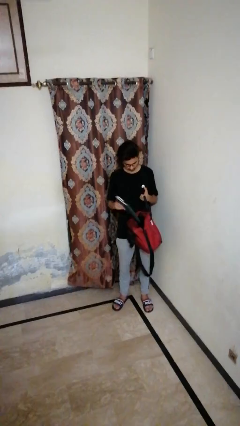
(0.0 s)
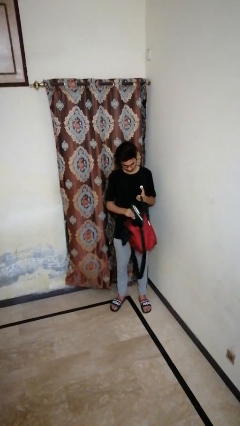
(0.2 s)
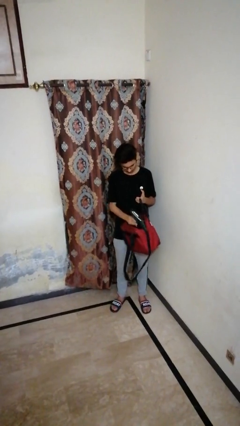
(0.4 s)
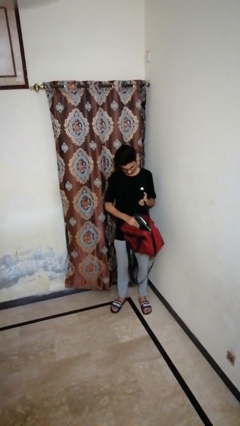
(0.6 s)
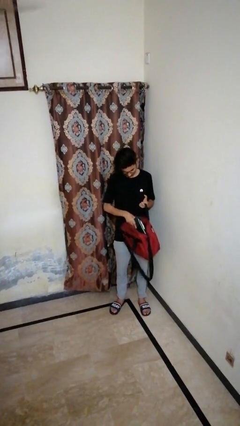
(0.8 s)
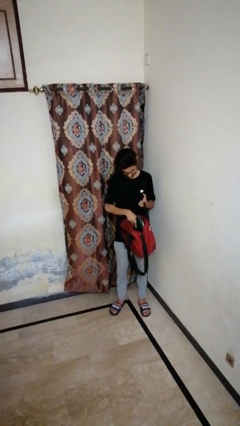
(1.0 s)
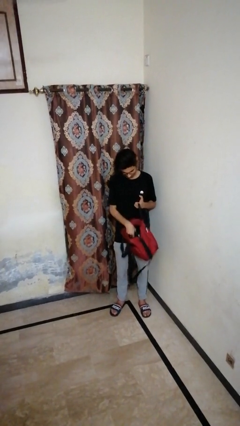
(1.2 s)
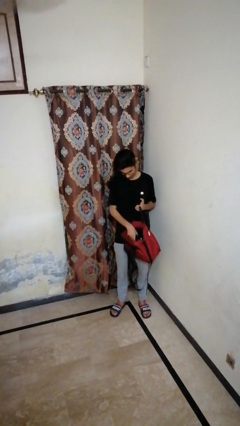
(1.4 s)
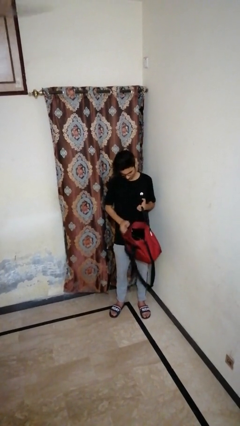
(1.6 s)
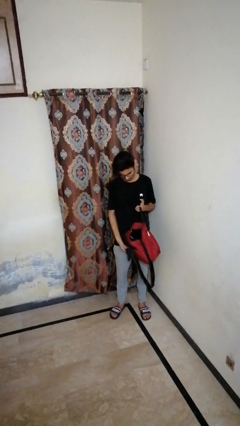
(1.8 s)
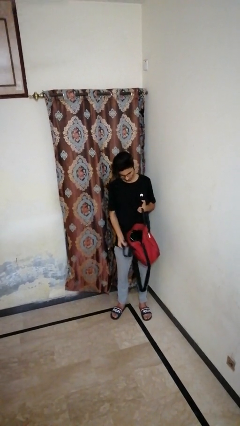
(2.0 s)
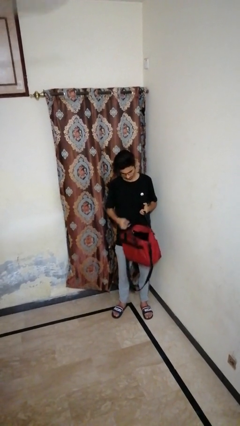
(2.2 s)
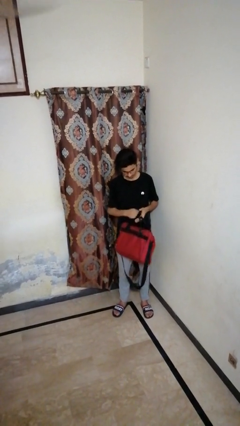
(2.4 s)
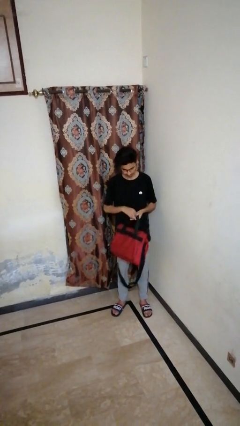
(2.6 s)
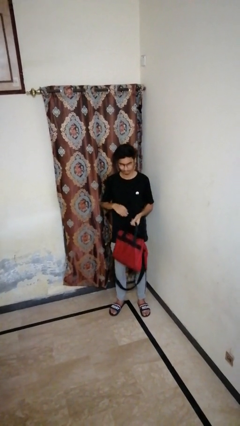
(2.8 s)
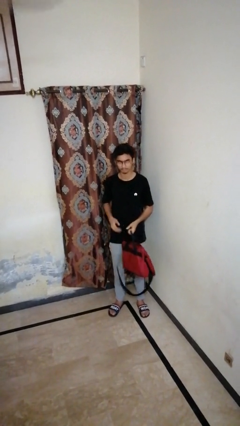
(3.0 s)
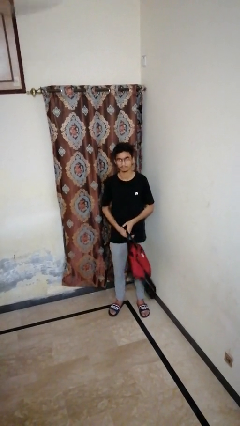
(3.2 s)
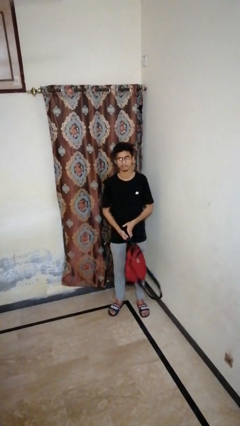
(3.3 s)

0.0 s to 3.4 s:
person puts object into backpack

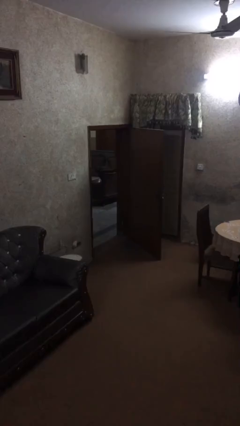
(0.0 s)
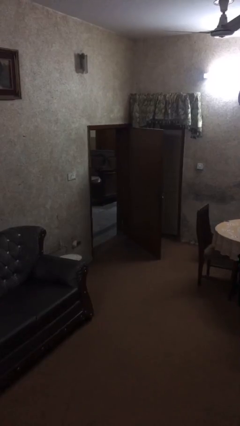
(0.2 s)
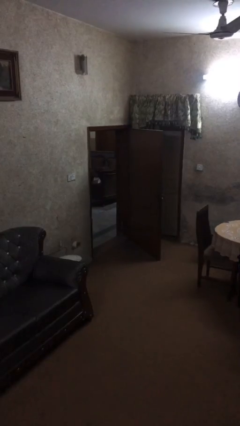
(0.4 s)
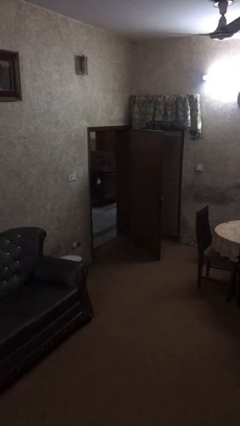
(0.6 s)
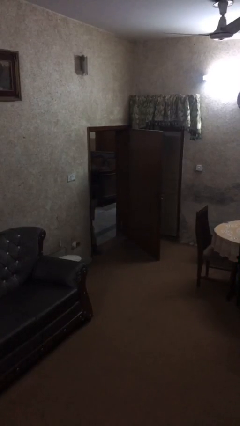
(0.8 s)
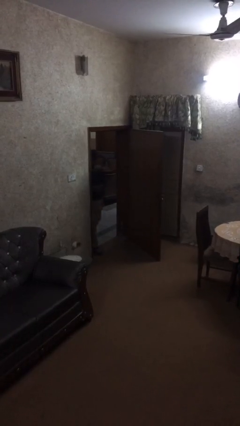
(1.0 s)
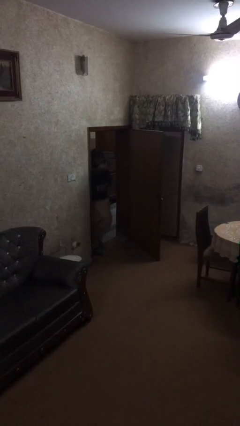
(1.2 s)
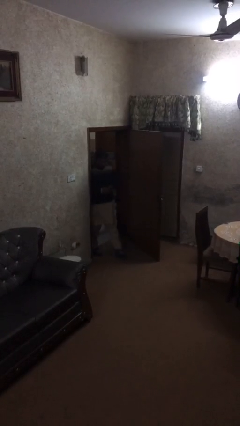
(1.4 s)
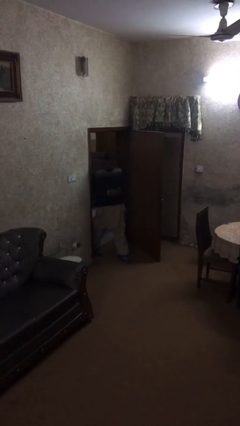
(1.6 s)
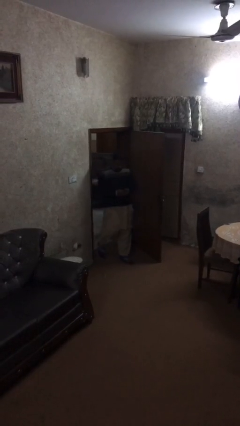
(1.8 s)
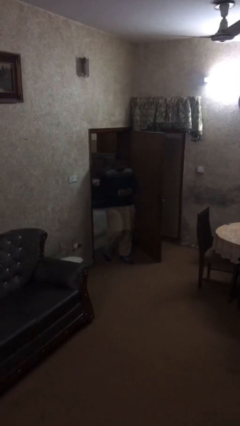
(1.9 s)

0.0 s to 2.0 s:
person enters scene through structure

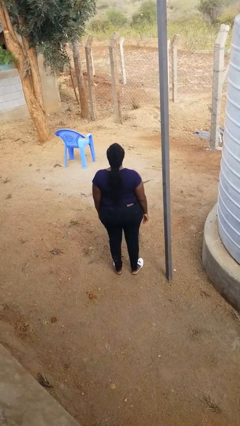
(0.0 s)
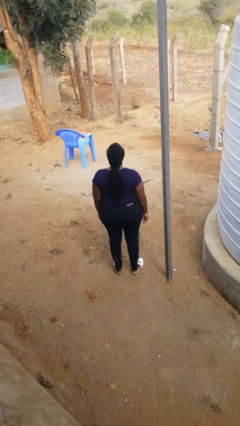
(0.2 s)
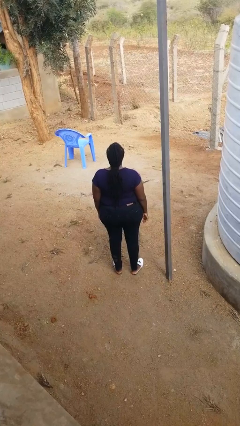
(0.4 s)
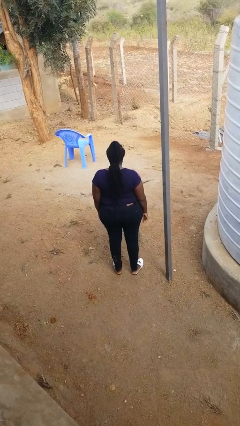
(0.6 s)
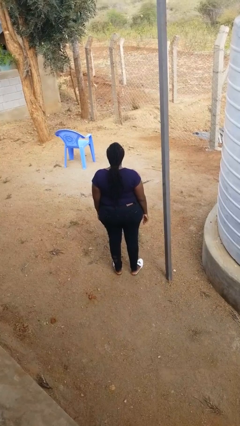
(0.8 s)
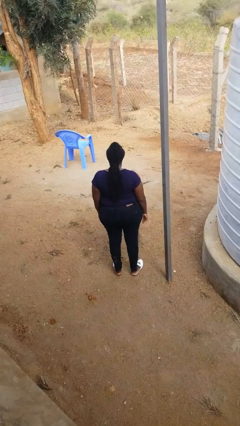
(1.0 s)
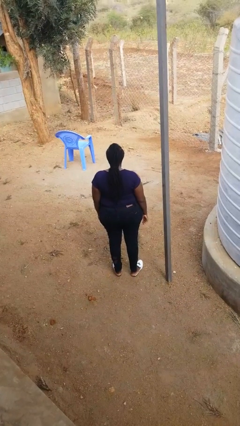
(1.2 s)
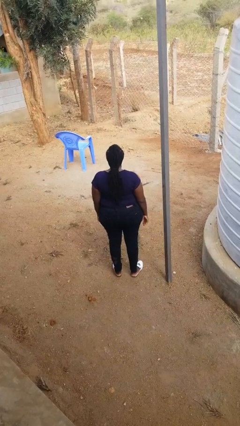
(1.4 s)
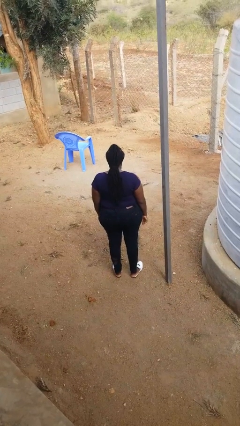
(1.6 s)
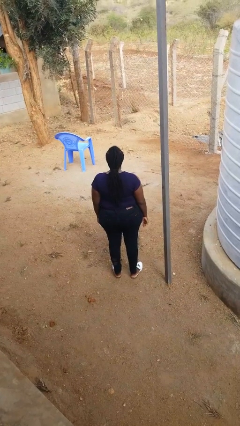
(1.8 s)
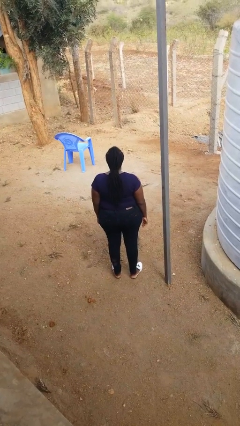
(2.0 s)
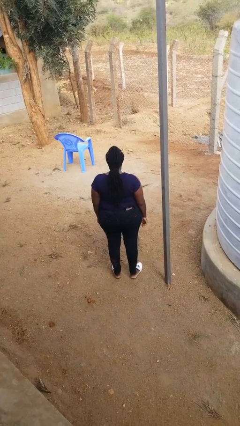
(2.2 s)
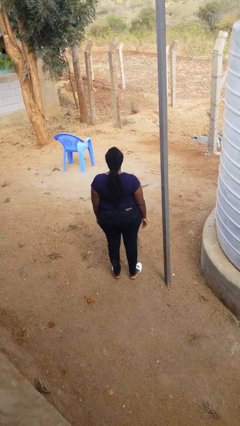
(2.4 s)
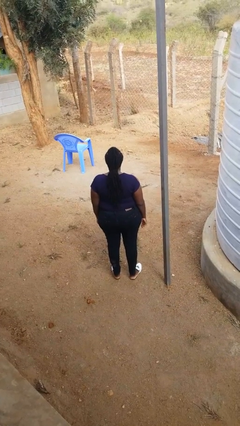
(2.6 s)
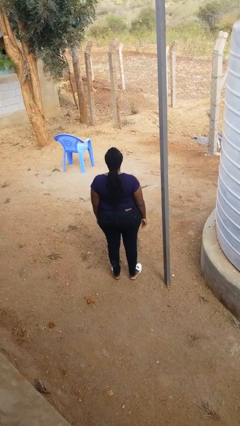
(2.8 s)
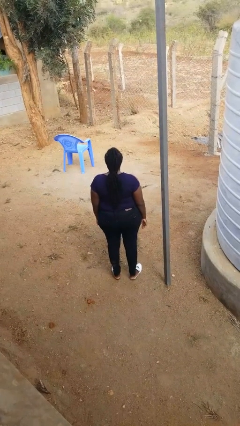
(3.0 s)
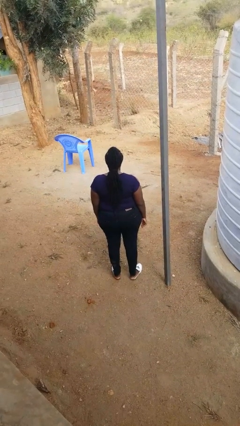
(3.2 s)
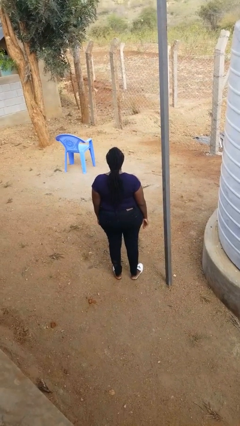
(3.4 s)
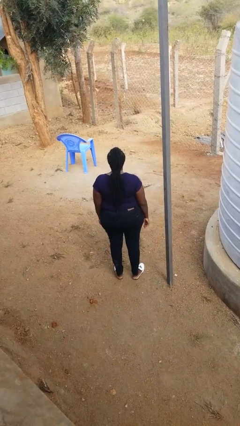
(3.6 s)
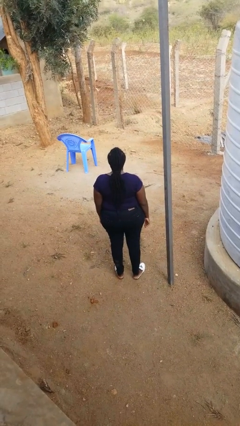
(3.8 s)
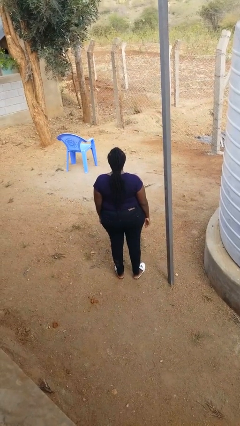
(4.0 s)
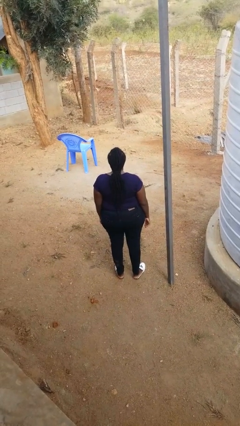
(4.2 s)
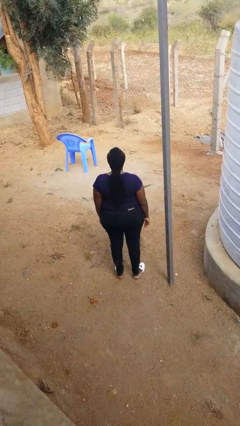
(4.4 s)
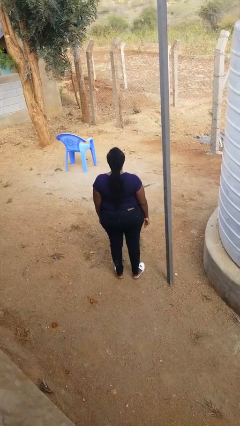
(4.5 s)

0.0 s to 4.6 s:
person nods head

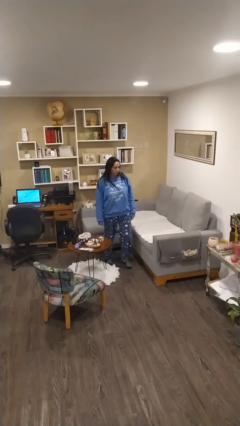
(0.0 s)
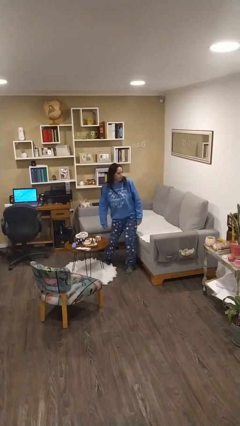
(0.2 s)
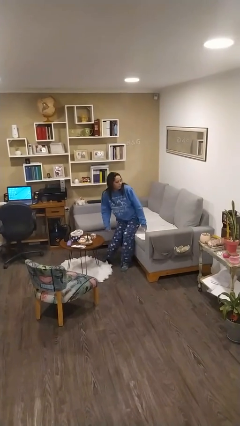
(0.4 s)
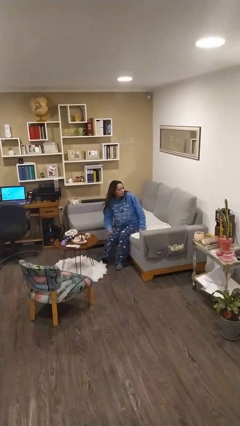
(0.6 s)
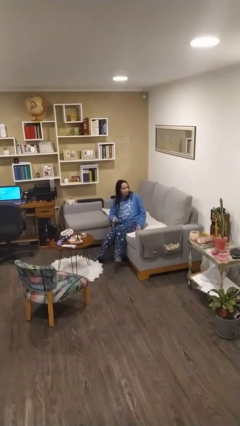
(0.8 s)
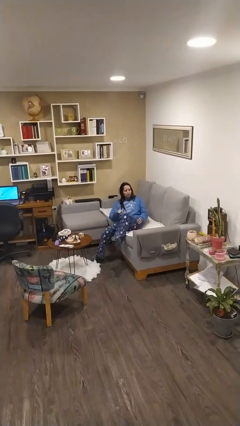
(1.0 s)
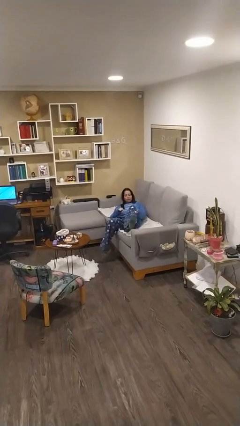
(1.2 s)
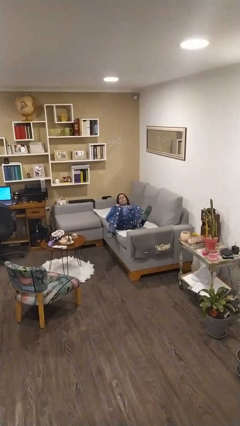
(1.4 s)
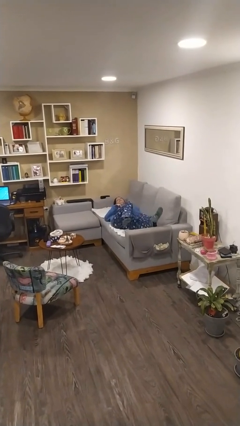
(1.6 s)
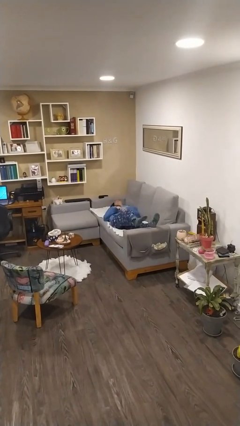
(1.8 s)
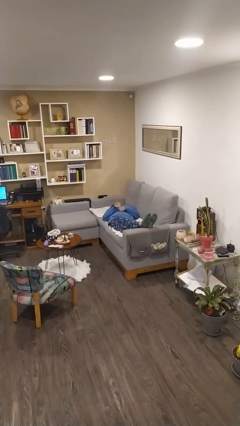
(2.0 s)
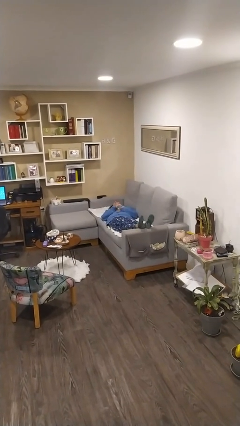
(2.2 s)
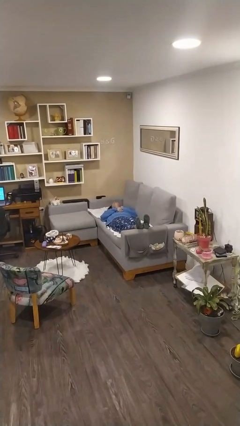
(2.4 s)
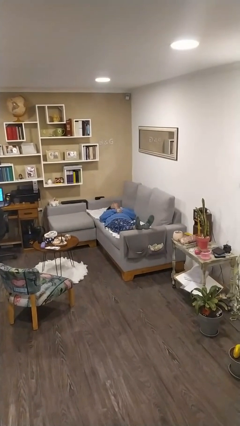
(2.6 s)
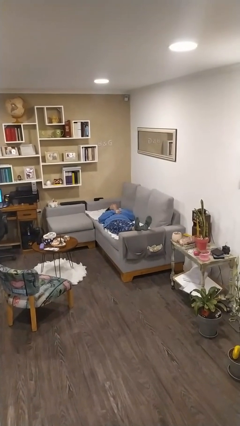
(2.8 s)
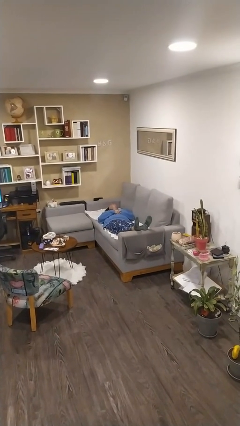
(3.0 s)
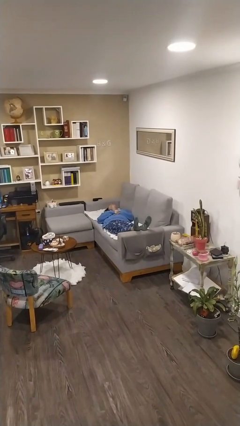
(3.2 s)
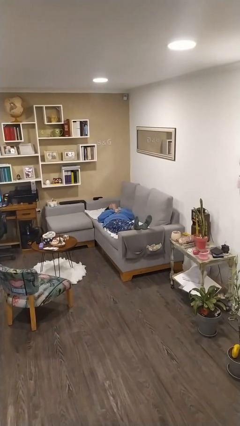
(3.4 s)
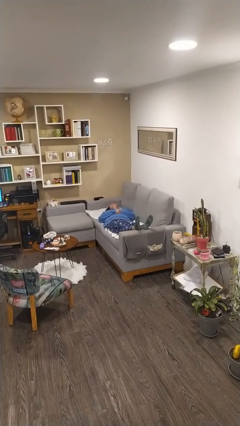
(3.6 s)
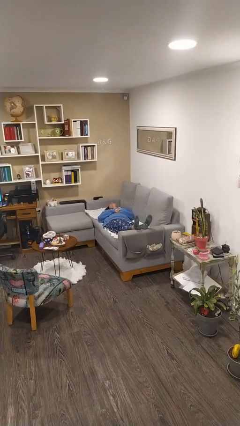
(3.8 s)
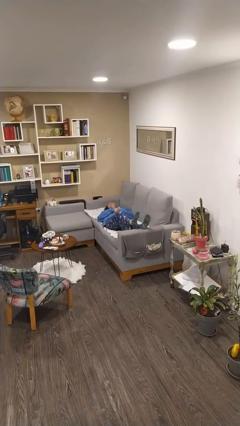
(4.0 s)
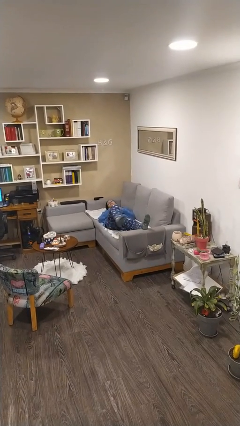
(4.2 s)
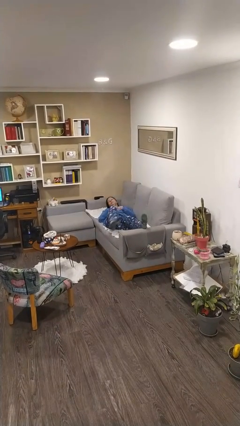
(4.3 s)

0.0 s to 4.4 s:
person lies down on couch

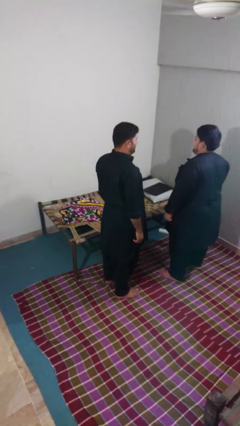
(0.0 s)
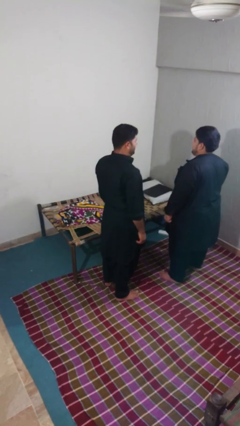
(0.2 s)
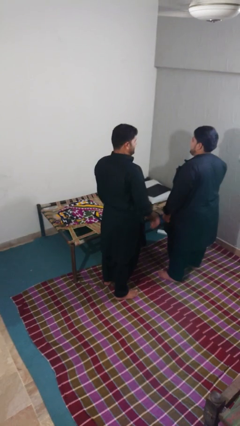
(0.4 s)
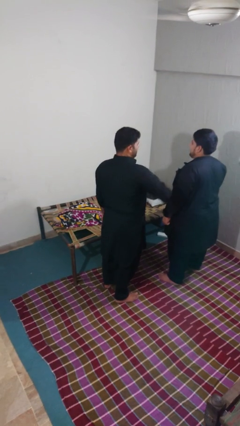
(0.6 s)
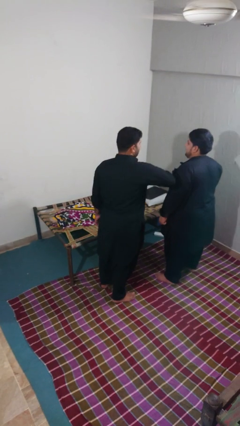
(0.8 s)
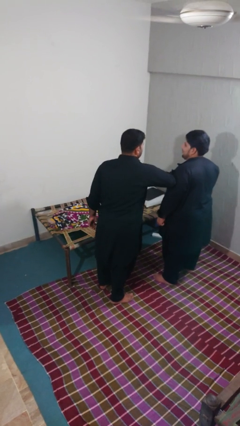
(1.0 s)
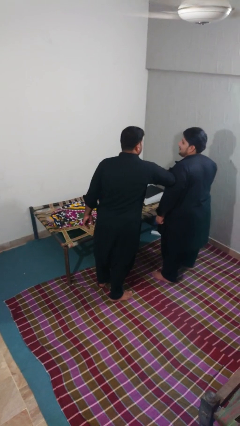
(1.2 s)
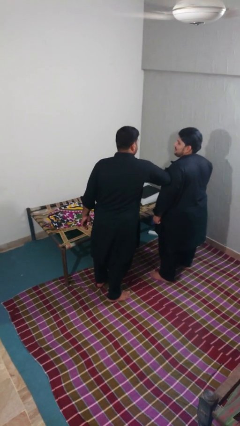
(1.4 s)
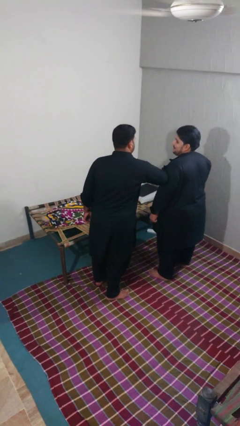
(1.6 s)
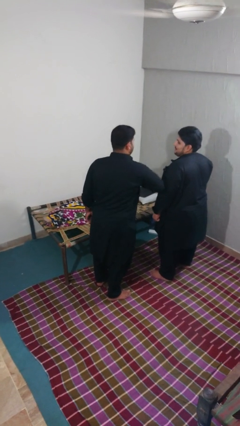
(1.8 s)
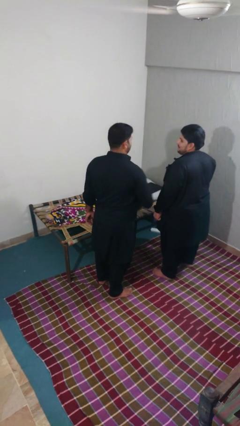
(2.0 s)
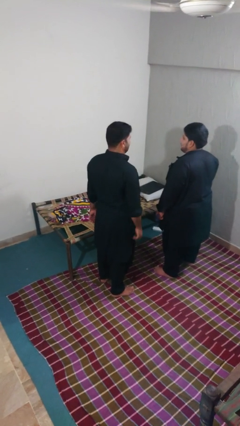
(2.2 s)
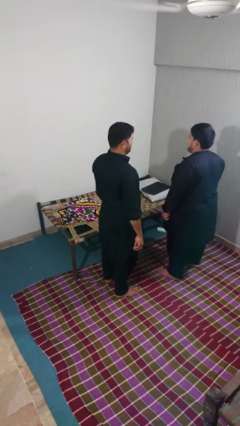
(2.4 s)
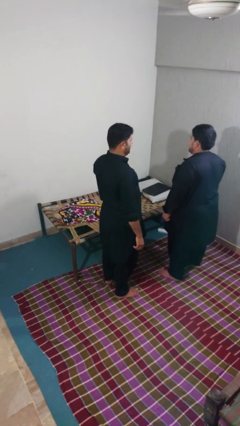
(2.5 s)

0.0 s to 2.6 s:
person nudges person with elbow

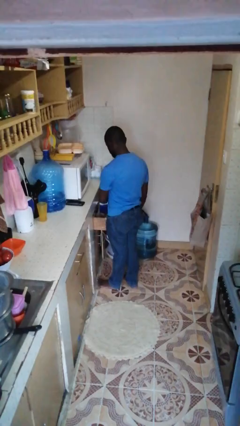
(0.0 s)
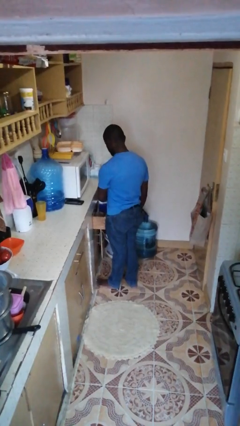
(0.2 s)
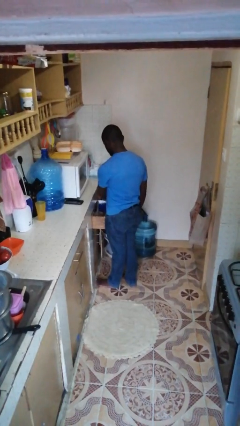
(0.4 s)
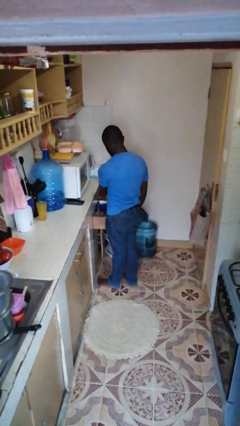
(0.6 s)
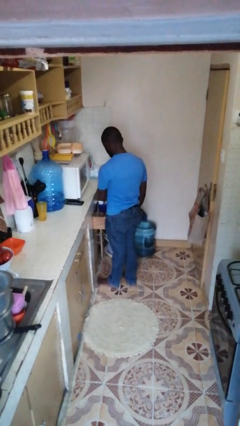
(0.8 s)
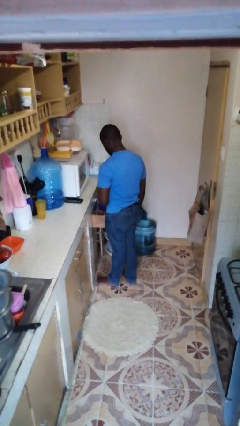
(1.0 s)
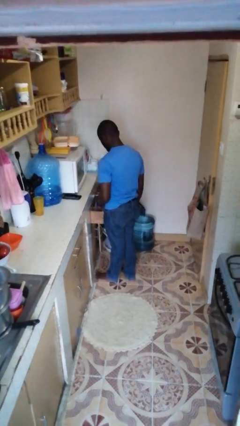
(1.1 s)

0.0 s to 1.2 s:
person puts object into kitchen drawer
